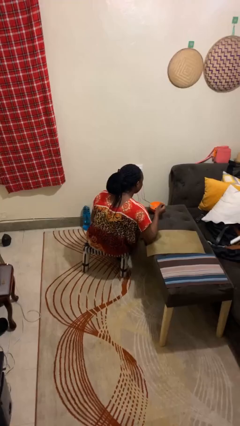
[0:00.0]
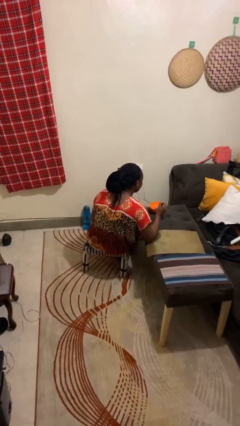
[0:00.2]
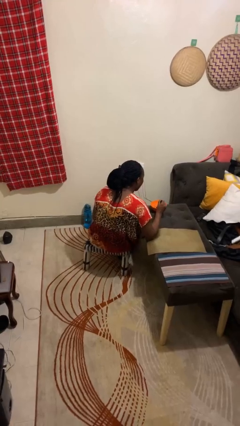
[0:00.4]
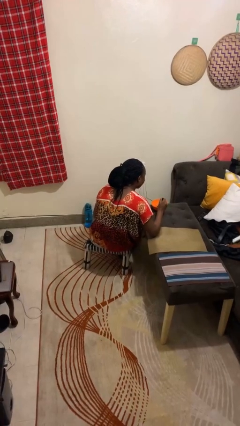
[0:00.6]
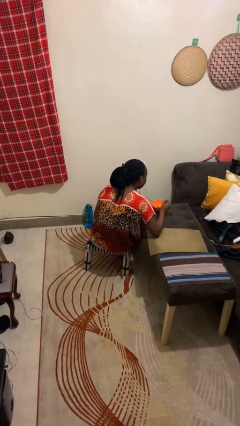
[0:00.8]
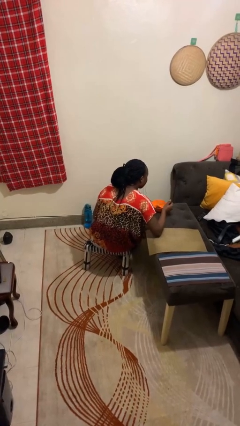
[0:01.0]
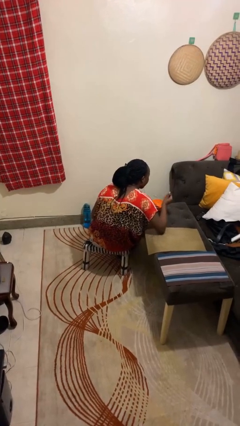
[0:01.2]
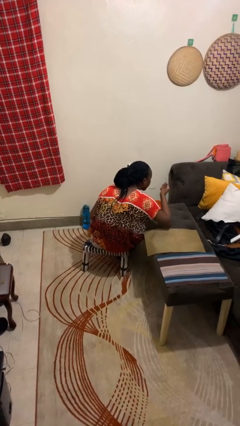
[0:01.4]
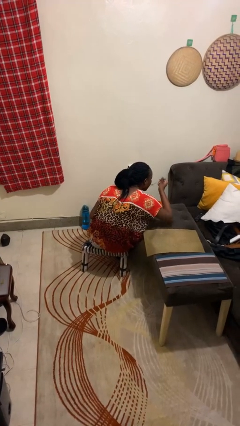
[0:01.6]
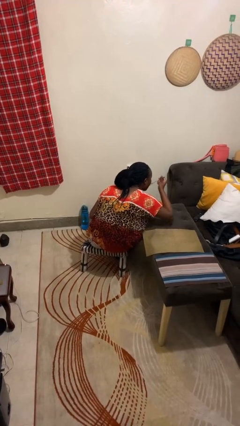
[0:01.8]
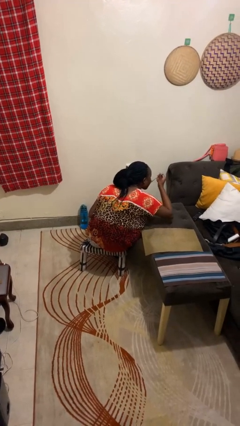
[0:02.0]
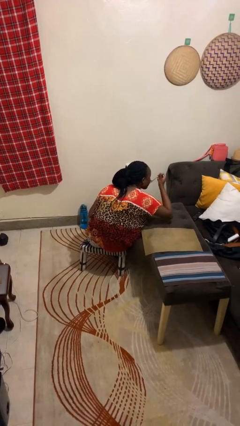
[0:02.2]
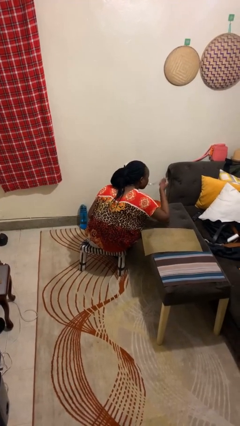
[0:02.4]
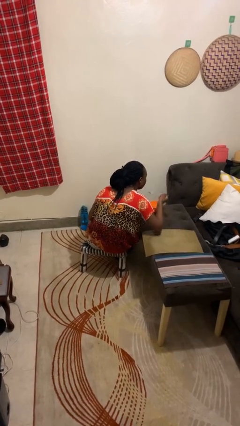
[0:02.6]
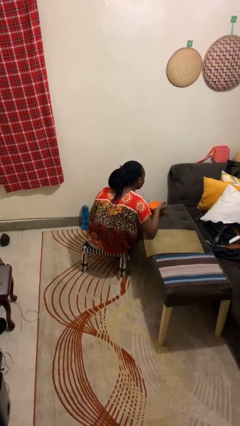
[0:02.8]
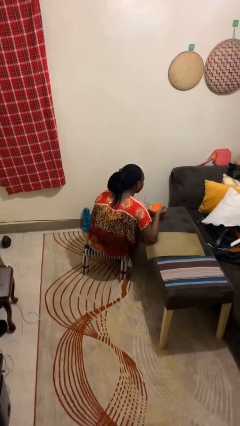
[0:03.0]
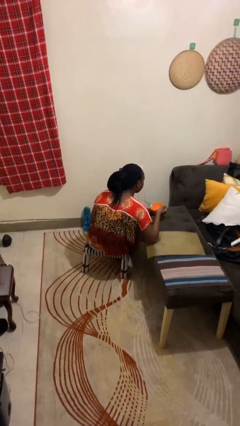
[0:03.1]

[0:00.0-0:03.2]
person eats with utensil

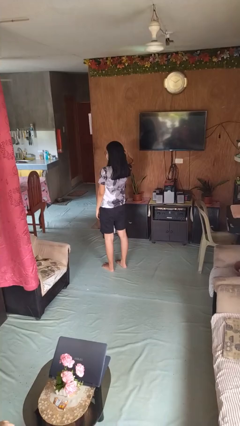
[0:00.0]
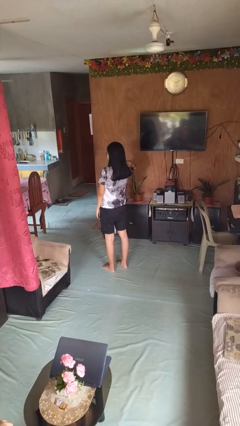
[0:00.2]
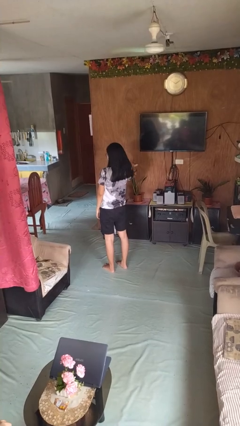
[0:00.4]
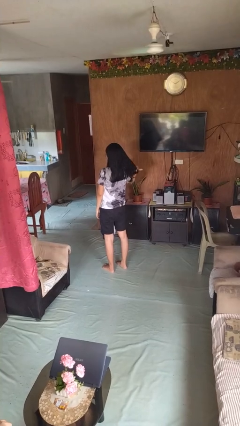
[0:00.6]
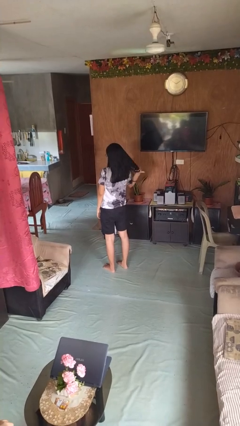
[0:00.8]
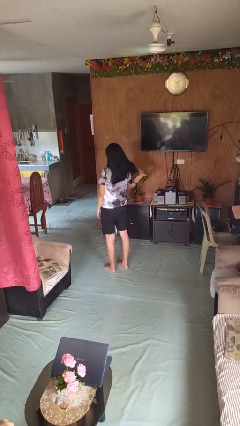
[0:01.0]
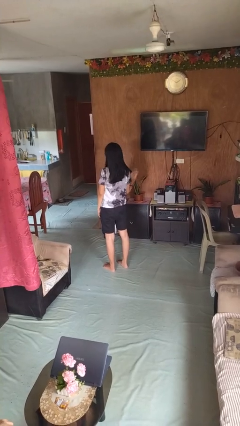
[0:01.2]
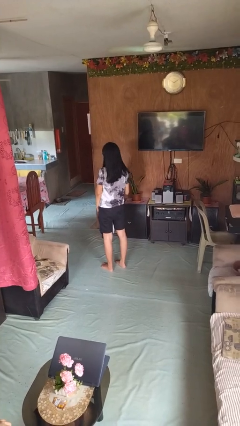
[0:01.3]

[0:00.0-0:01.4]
person strokes hair

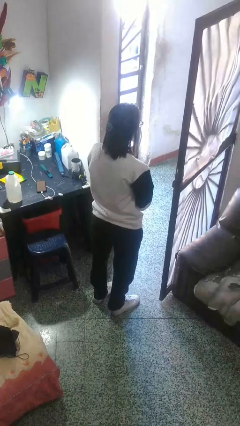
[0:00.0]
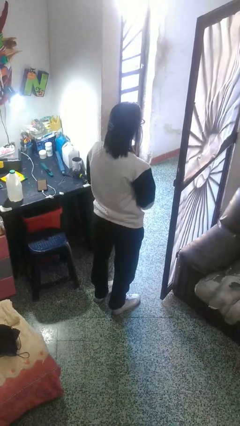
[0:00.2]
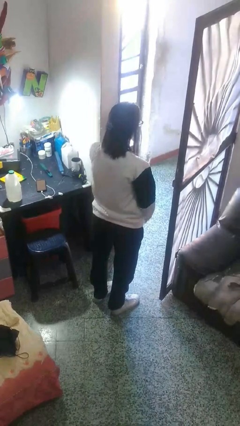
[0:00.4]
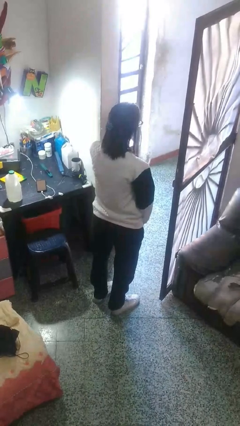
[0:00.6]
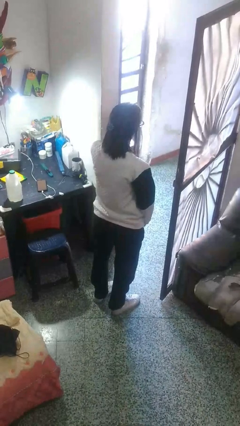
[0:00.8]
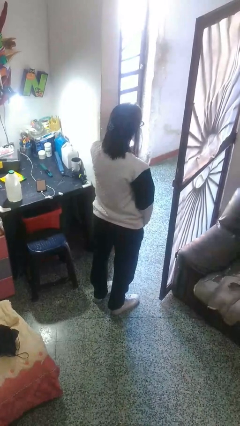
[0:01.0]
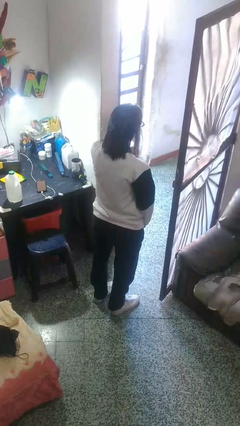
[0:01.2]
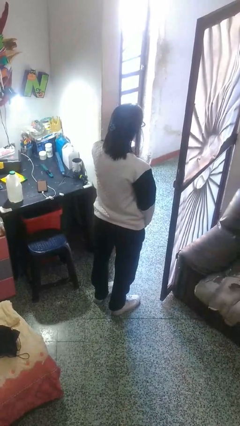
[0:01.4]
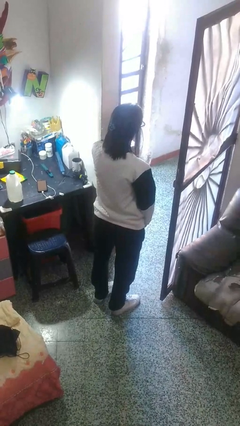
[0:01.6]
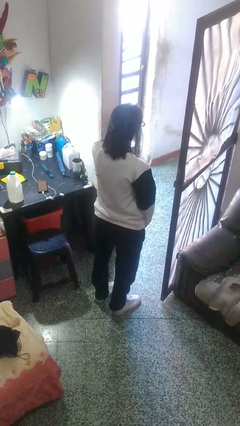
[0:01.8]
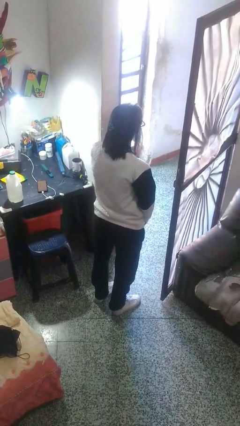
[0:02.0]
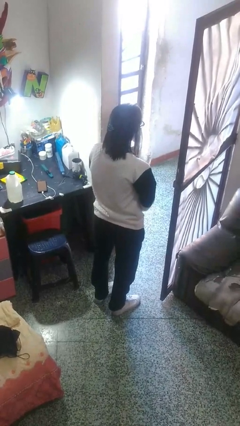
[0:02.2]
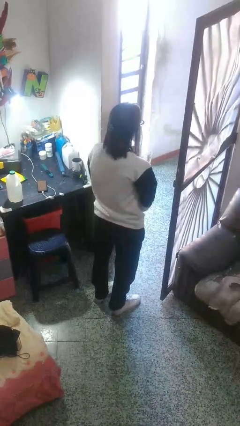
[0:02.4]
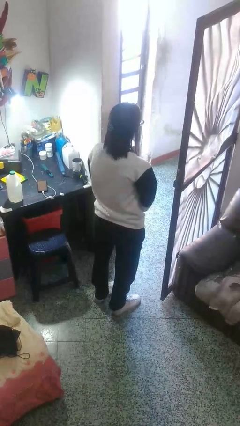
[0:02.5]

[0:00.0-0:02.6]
person scratches face

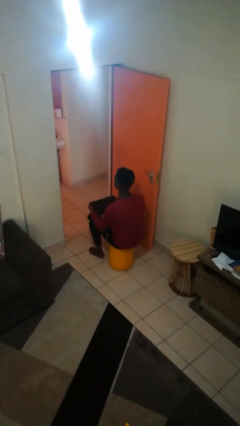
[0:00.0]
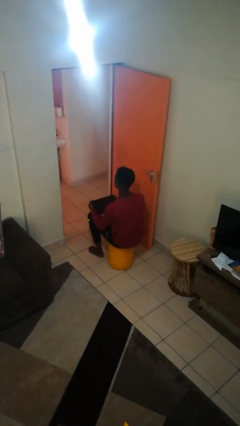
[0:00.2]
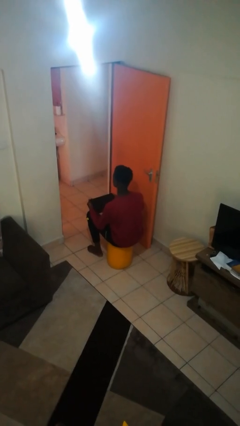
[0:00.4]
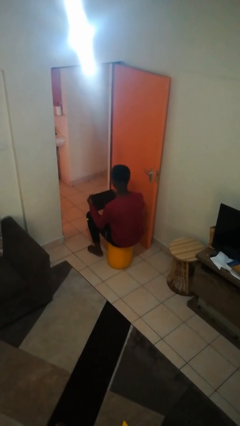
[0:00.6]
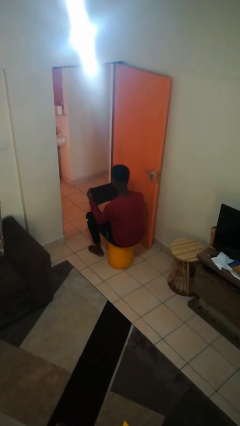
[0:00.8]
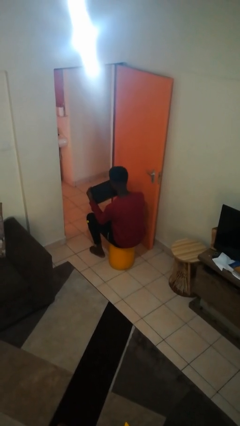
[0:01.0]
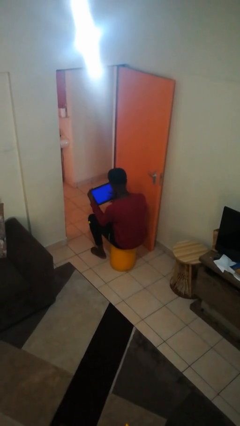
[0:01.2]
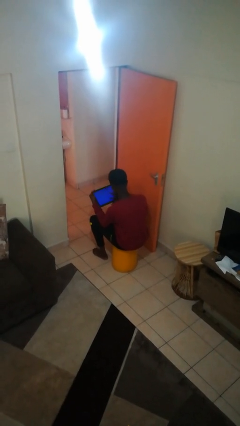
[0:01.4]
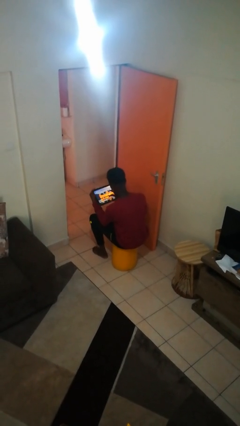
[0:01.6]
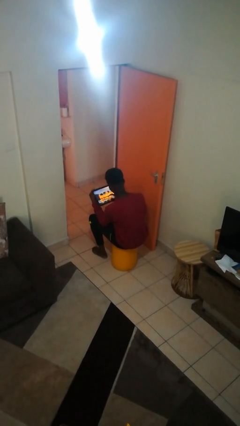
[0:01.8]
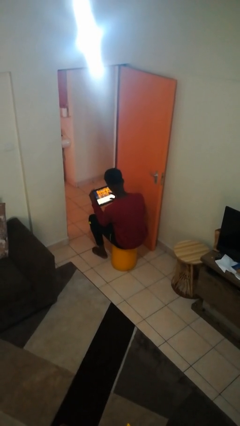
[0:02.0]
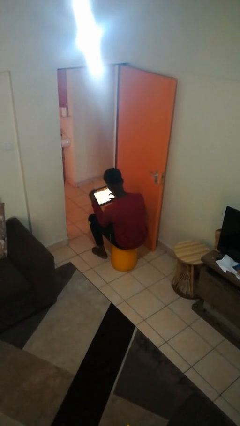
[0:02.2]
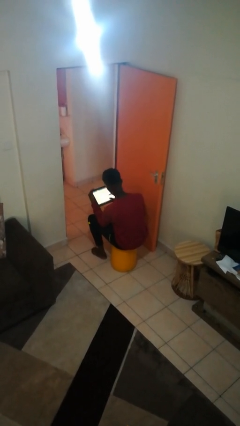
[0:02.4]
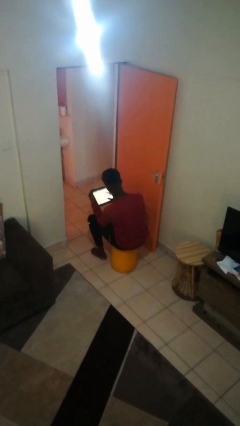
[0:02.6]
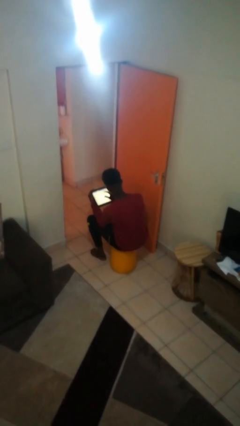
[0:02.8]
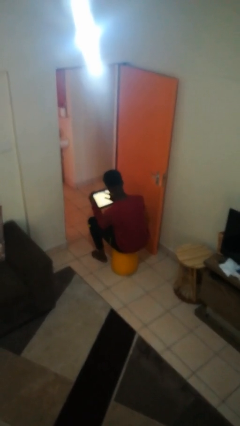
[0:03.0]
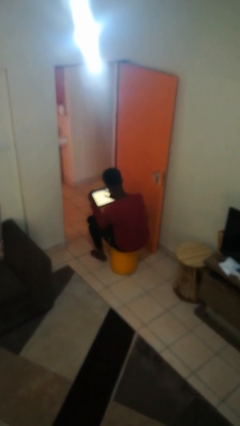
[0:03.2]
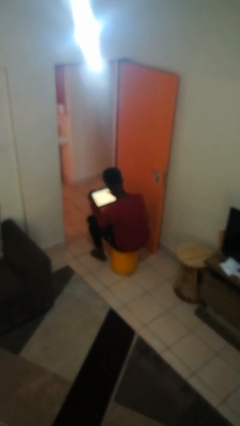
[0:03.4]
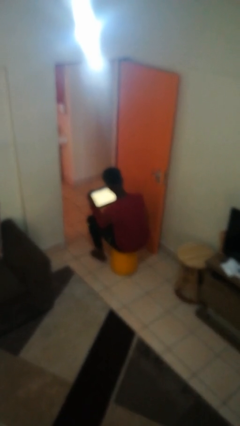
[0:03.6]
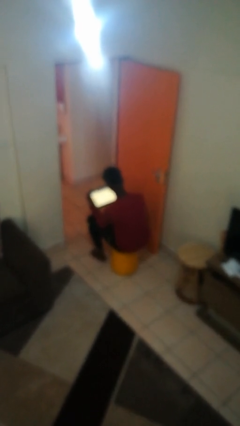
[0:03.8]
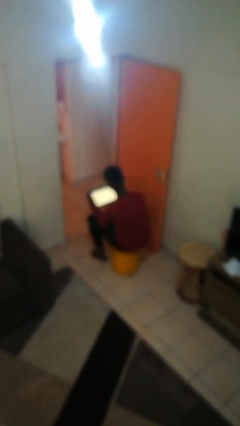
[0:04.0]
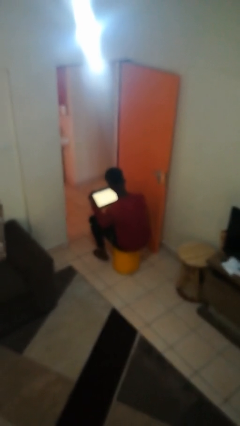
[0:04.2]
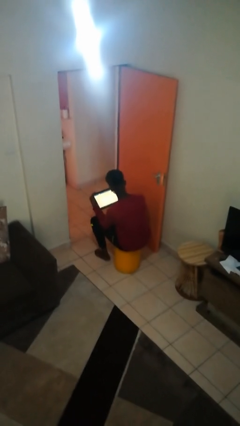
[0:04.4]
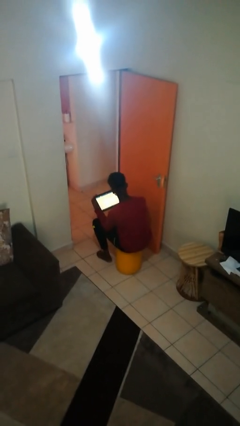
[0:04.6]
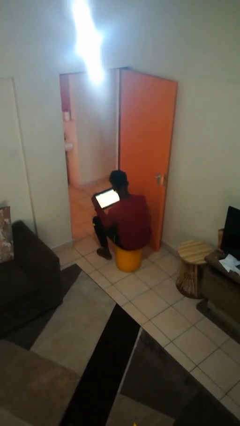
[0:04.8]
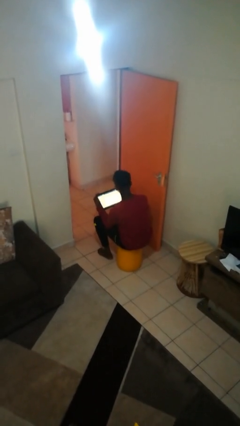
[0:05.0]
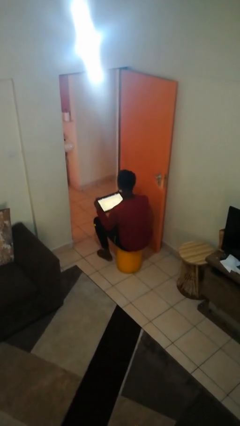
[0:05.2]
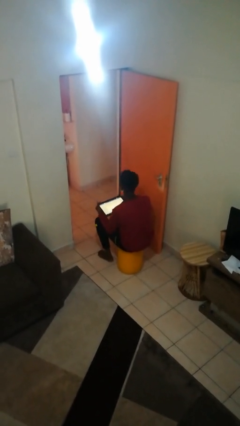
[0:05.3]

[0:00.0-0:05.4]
person interacts with tablet

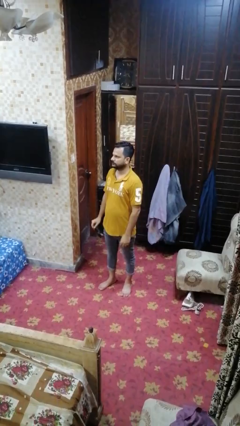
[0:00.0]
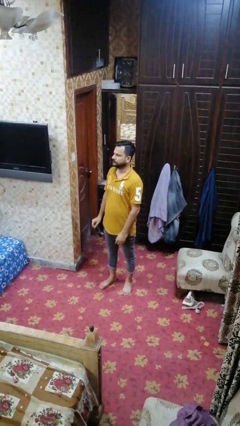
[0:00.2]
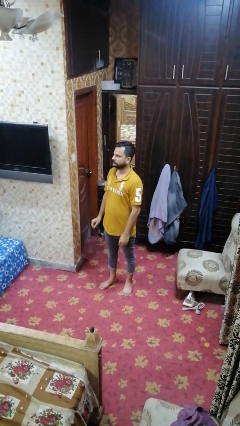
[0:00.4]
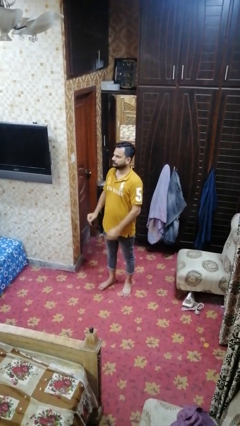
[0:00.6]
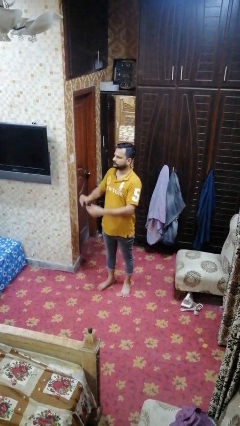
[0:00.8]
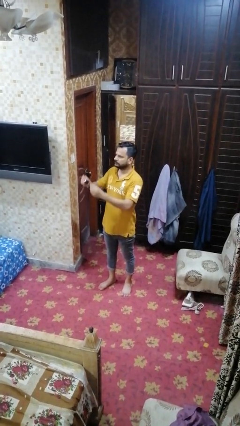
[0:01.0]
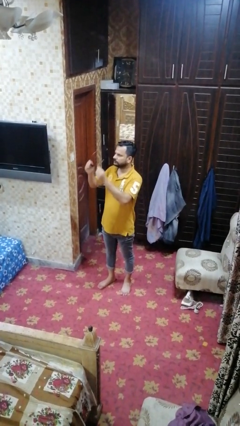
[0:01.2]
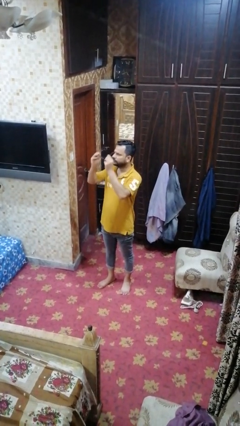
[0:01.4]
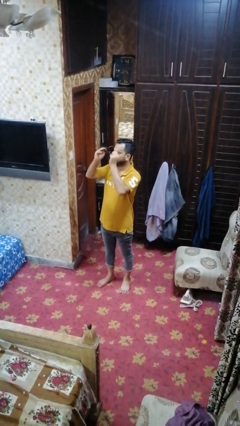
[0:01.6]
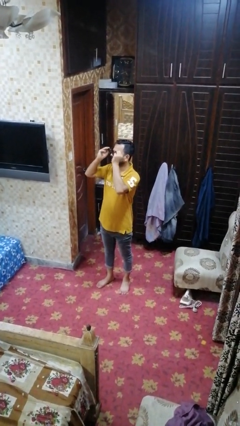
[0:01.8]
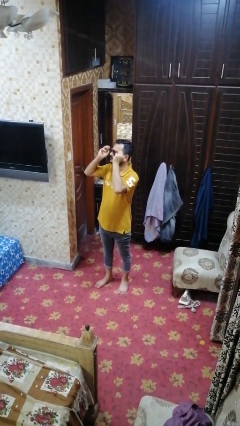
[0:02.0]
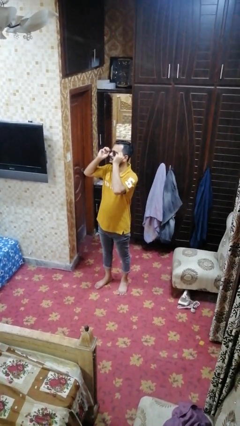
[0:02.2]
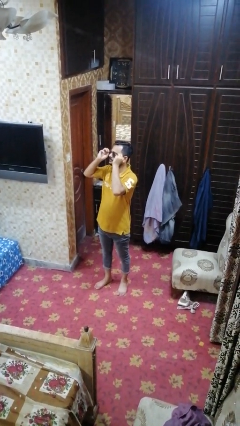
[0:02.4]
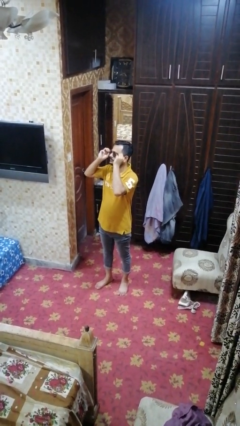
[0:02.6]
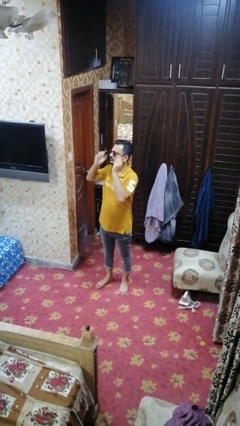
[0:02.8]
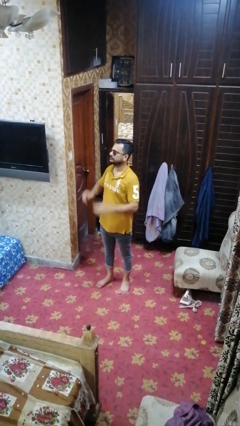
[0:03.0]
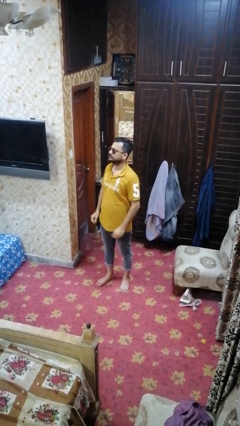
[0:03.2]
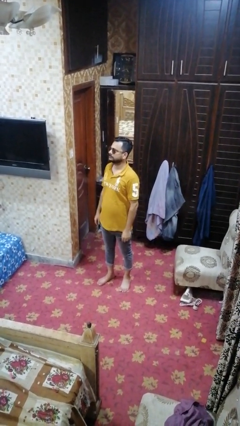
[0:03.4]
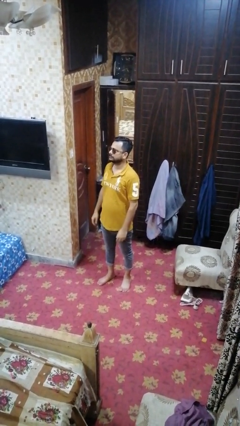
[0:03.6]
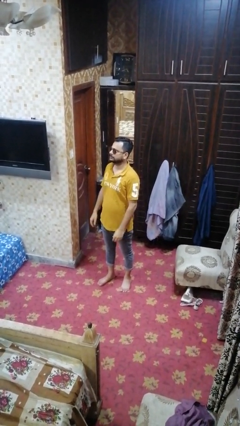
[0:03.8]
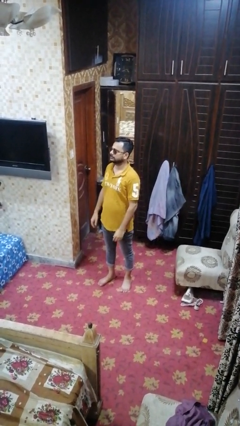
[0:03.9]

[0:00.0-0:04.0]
person puts on sunglasses

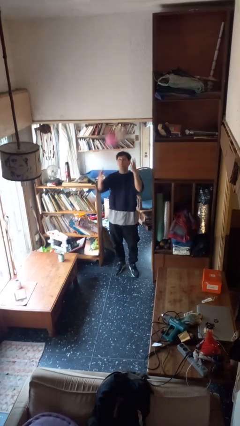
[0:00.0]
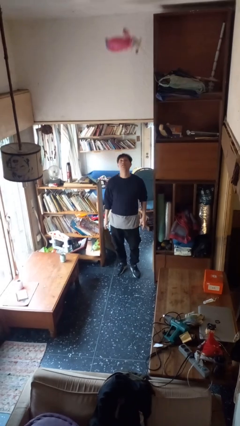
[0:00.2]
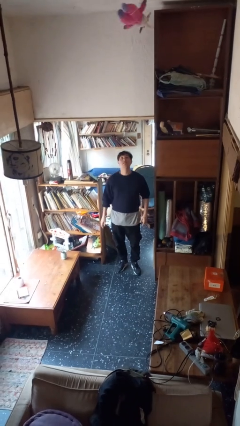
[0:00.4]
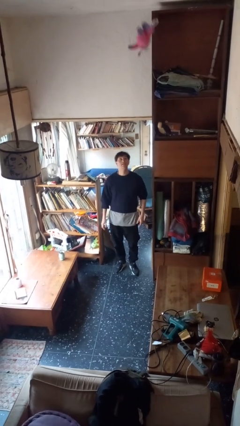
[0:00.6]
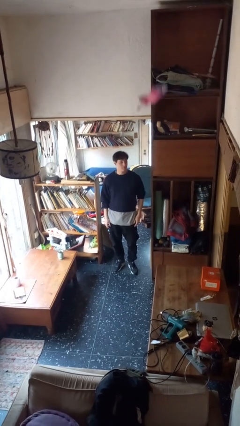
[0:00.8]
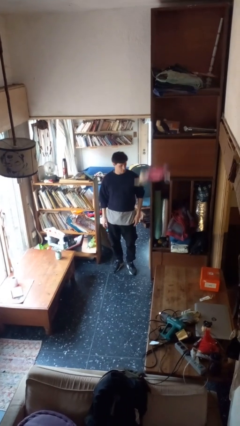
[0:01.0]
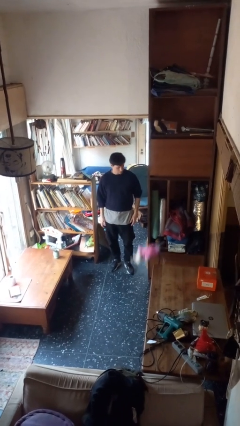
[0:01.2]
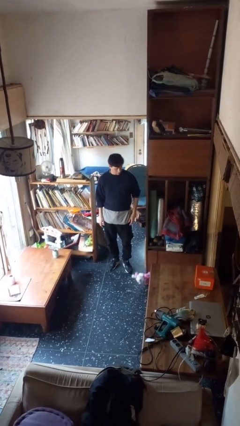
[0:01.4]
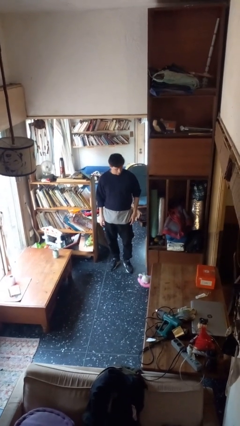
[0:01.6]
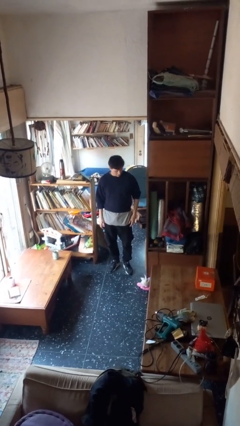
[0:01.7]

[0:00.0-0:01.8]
person throws object into air
